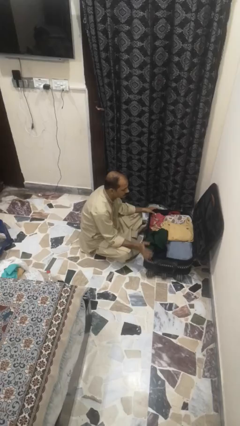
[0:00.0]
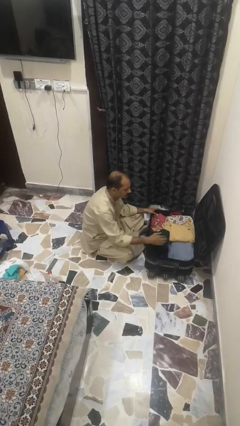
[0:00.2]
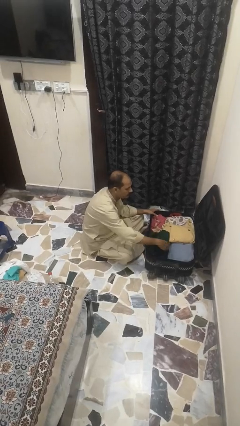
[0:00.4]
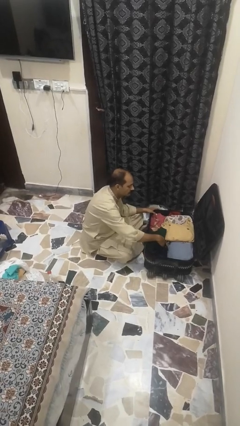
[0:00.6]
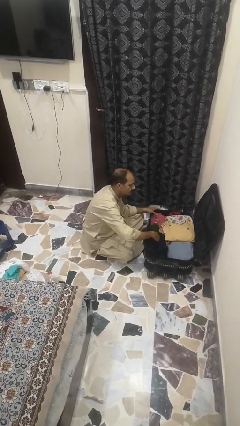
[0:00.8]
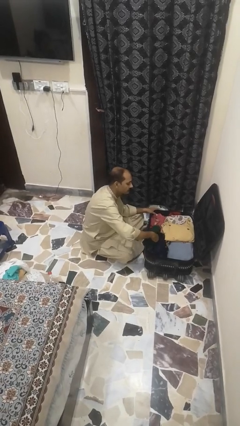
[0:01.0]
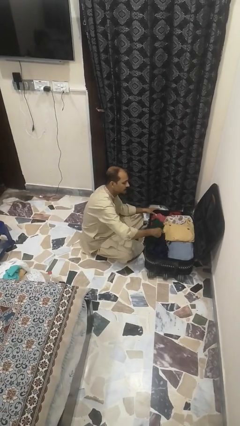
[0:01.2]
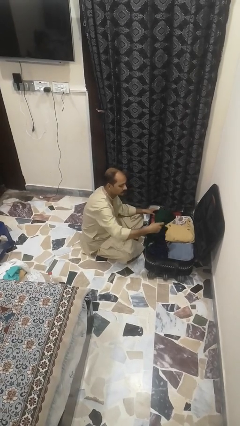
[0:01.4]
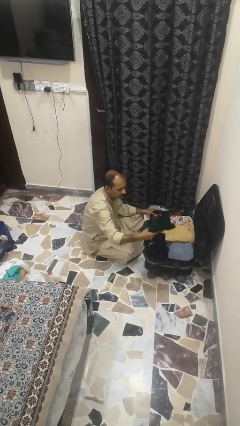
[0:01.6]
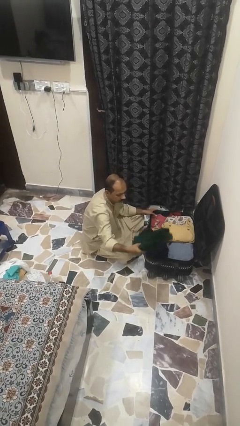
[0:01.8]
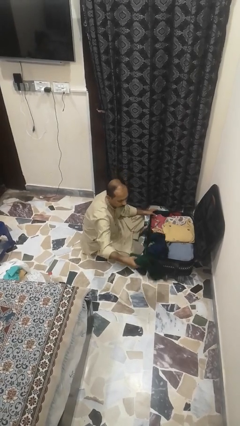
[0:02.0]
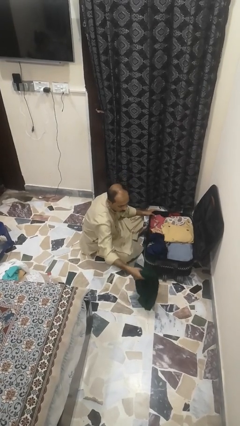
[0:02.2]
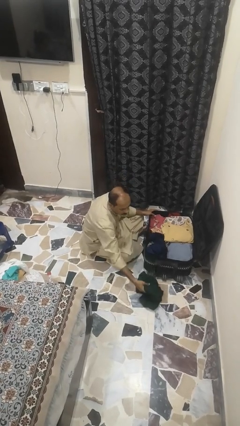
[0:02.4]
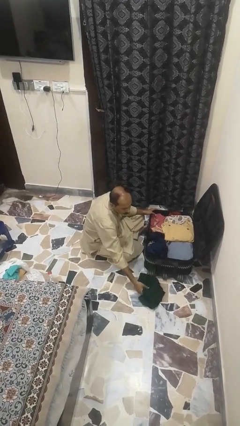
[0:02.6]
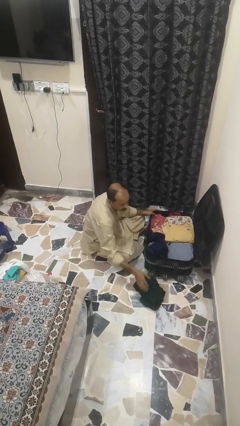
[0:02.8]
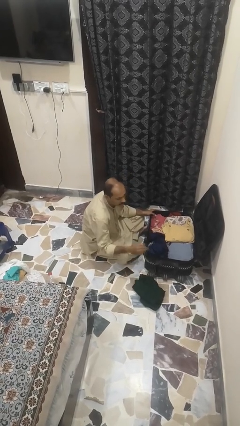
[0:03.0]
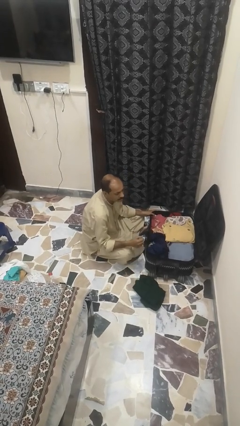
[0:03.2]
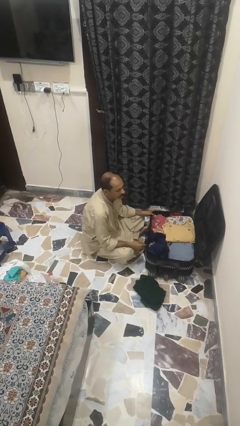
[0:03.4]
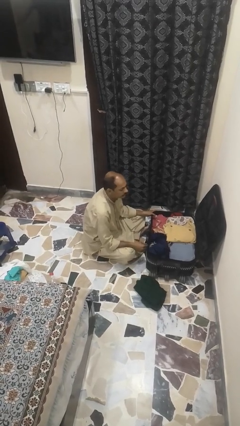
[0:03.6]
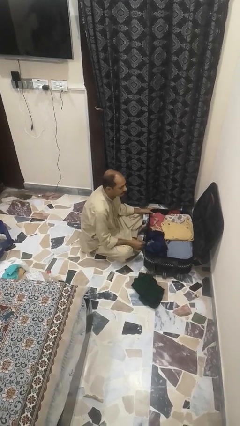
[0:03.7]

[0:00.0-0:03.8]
person unloads clothes from suitcase

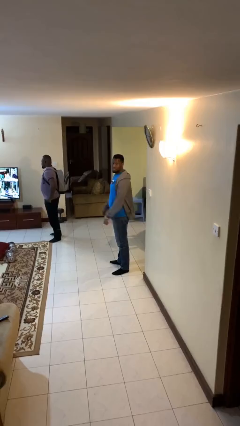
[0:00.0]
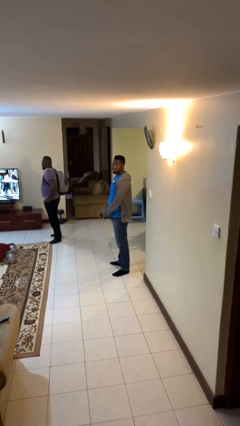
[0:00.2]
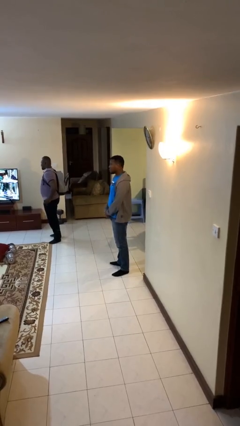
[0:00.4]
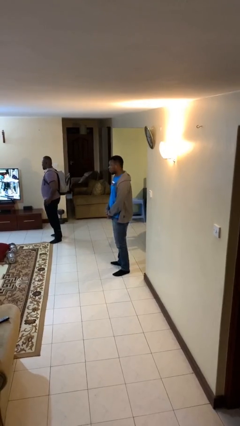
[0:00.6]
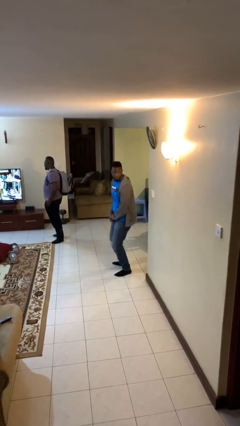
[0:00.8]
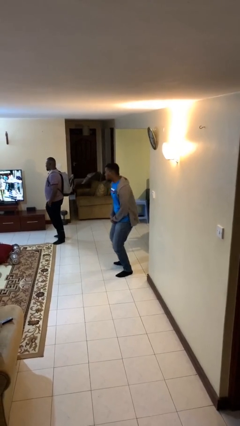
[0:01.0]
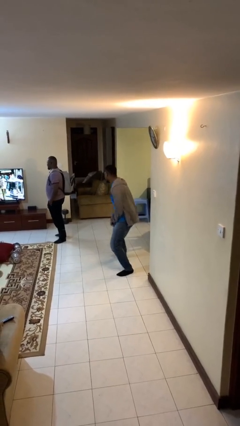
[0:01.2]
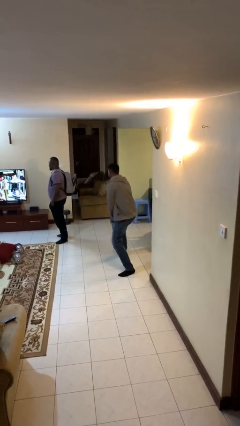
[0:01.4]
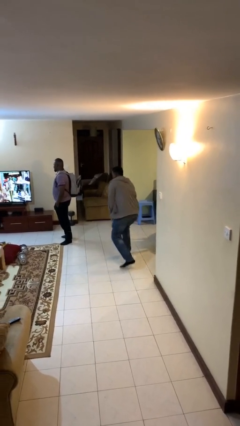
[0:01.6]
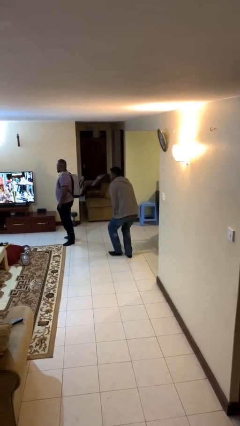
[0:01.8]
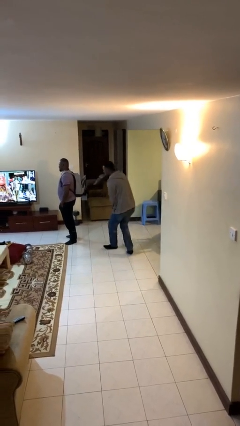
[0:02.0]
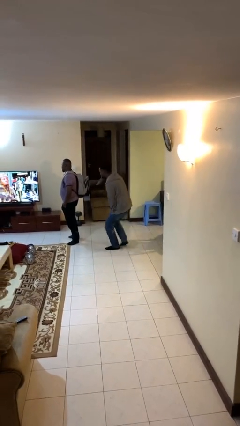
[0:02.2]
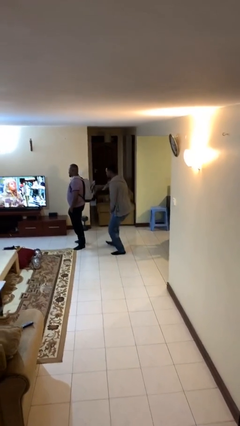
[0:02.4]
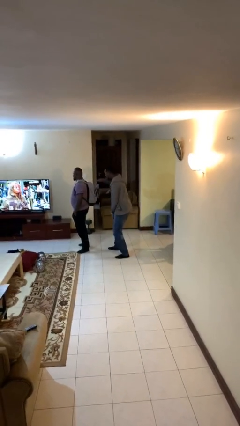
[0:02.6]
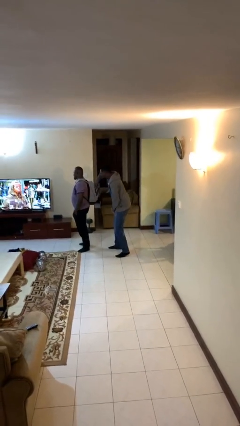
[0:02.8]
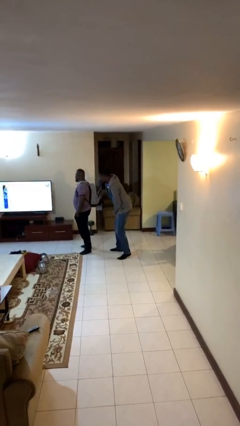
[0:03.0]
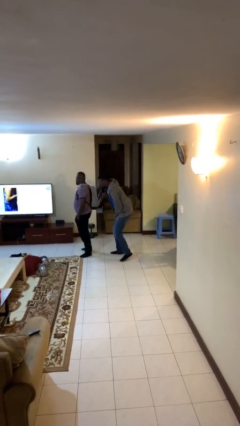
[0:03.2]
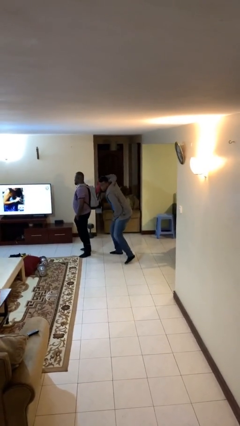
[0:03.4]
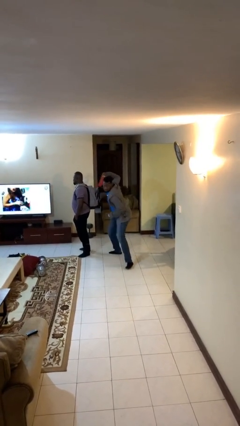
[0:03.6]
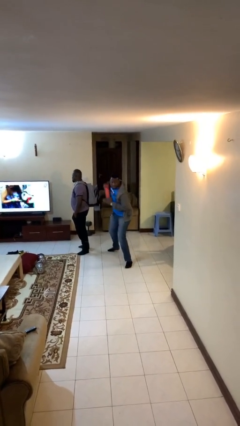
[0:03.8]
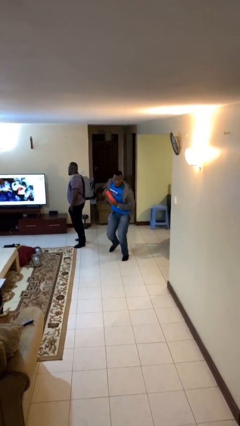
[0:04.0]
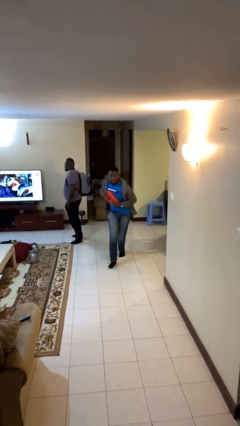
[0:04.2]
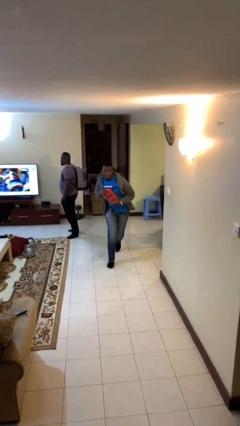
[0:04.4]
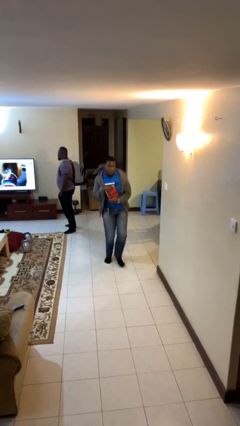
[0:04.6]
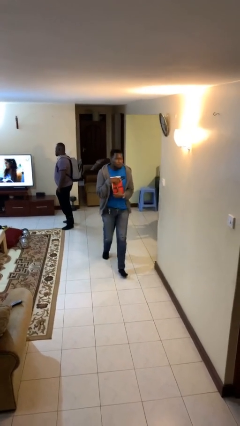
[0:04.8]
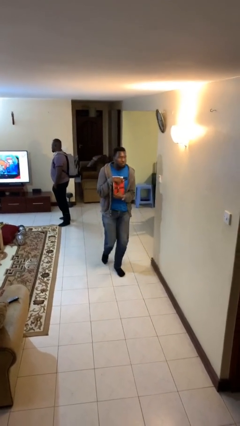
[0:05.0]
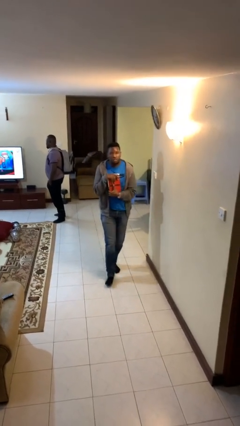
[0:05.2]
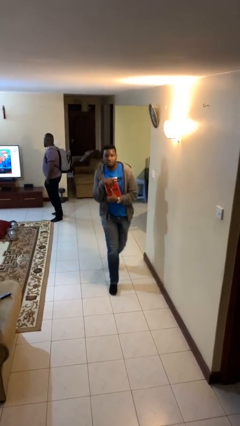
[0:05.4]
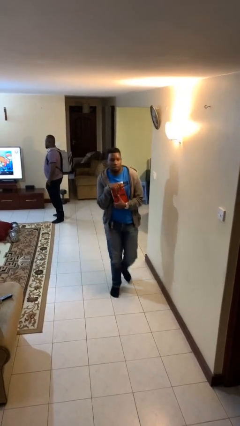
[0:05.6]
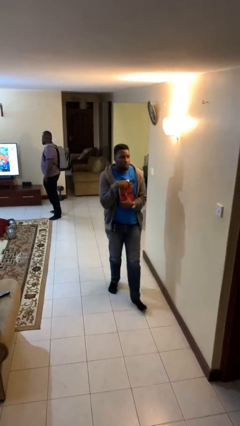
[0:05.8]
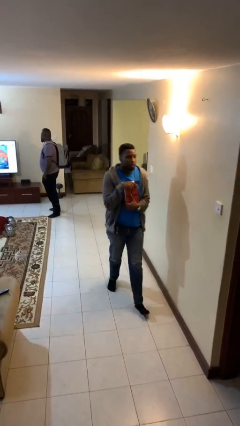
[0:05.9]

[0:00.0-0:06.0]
person steals object from person

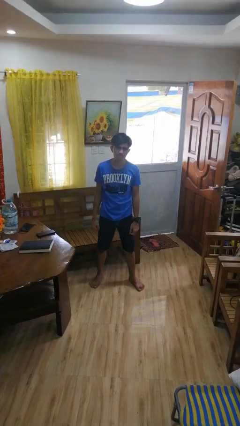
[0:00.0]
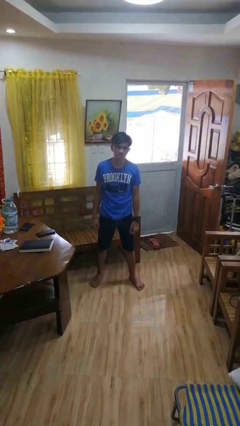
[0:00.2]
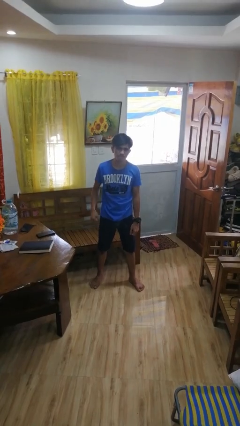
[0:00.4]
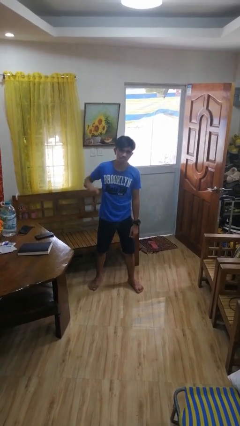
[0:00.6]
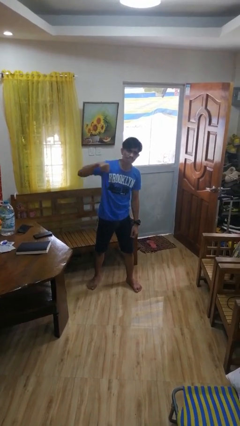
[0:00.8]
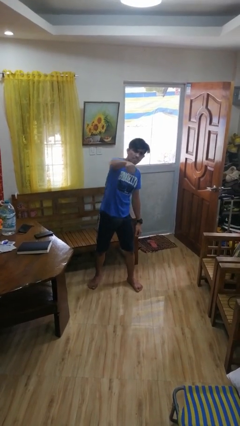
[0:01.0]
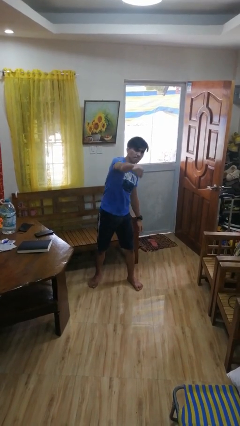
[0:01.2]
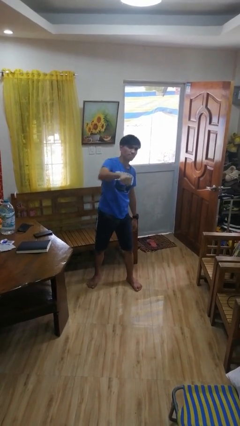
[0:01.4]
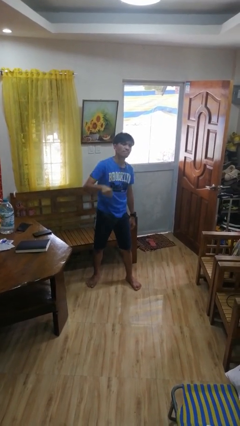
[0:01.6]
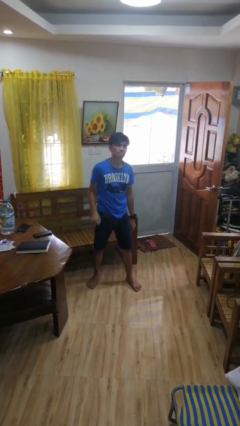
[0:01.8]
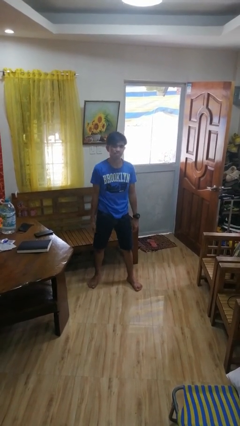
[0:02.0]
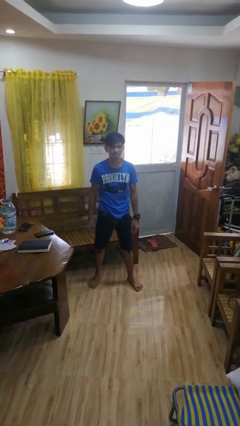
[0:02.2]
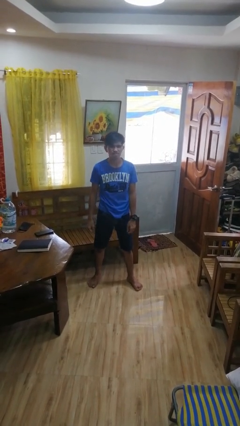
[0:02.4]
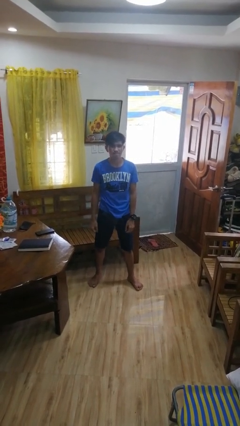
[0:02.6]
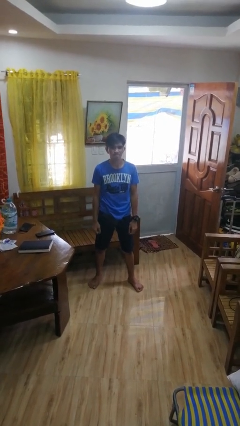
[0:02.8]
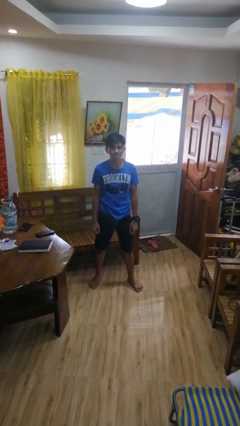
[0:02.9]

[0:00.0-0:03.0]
person punches

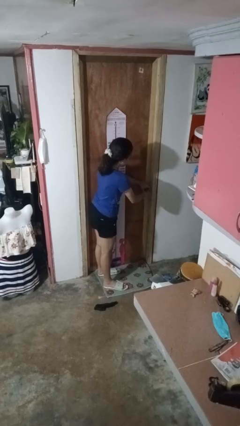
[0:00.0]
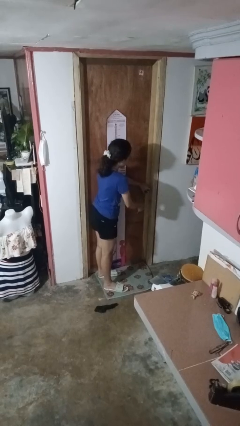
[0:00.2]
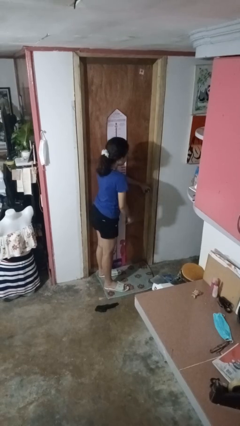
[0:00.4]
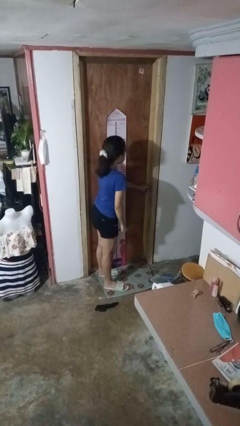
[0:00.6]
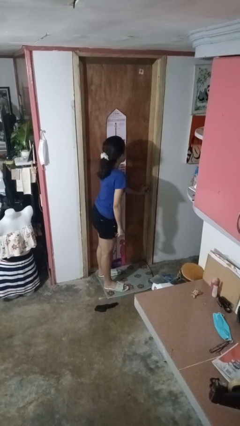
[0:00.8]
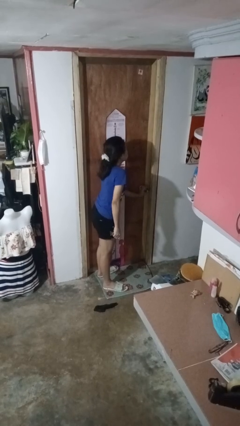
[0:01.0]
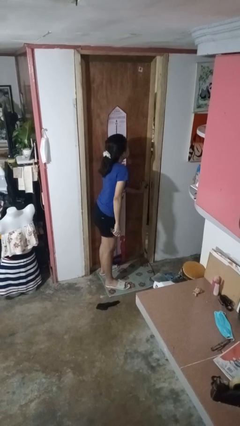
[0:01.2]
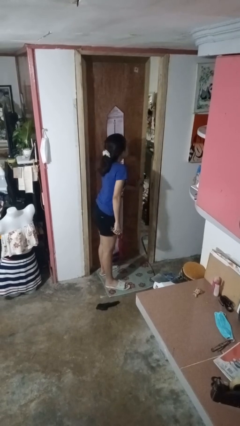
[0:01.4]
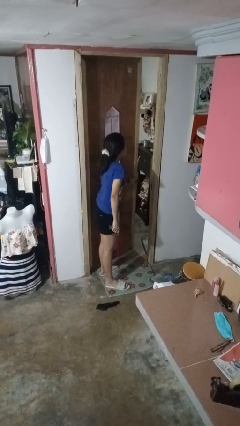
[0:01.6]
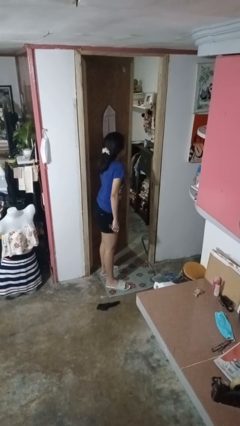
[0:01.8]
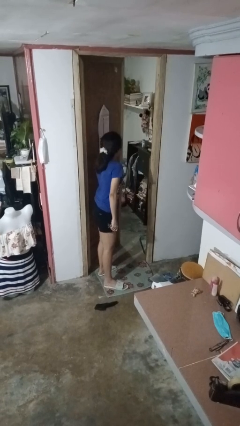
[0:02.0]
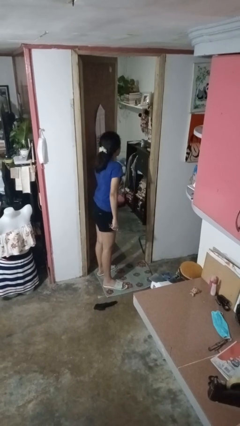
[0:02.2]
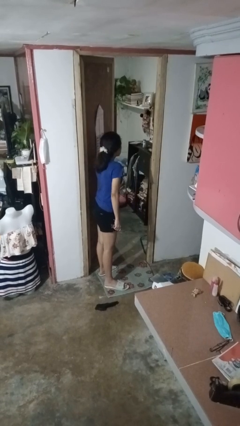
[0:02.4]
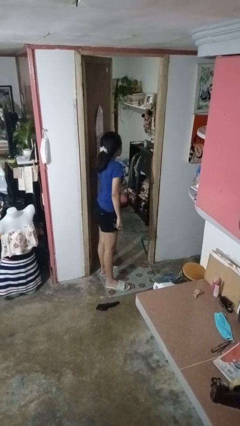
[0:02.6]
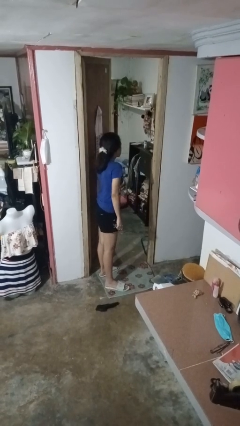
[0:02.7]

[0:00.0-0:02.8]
person opens facility door

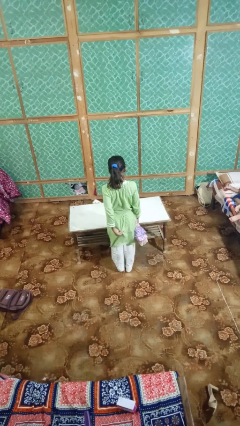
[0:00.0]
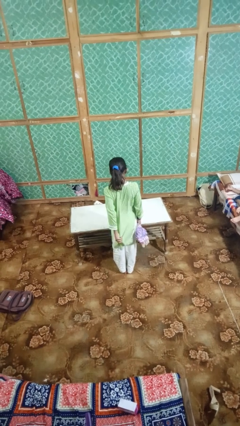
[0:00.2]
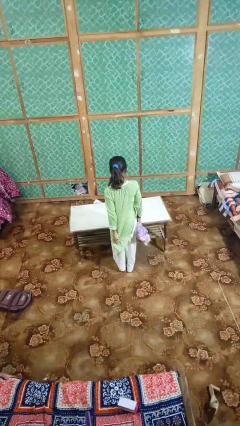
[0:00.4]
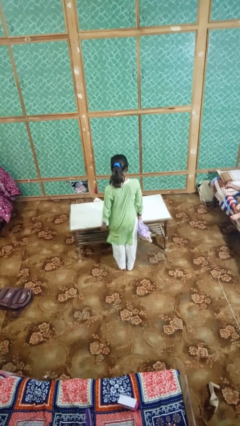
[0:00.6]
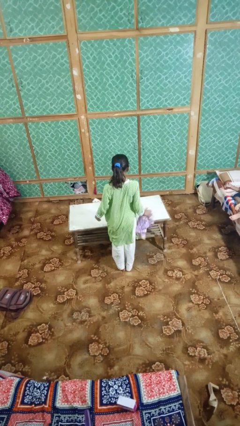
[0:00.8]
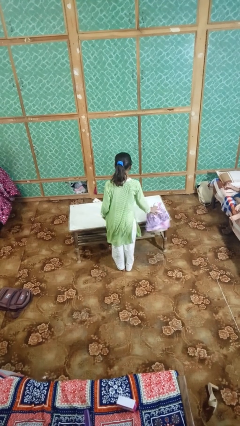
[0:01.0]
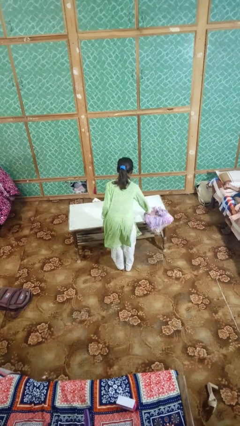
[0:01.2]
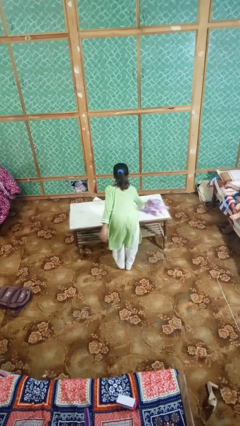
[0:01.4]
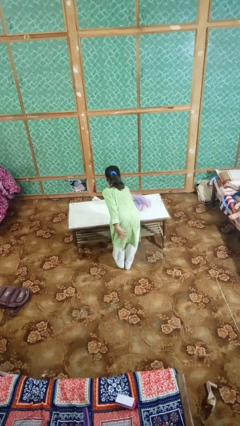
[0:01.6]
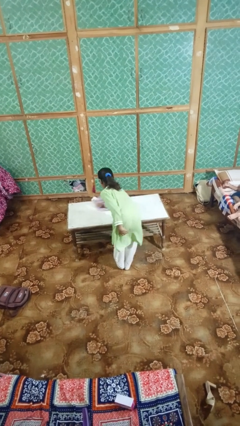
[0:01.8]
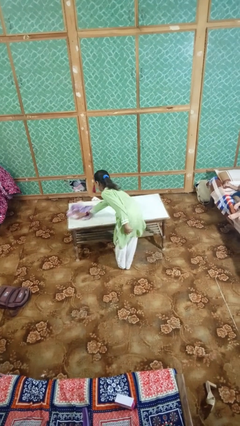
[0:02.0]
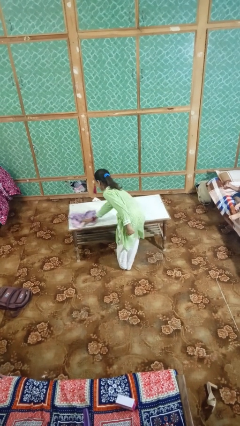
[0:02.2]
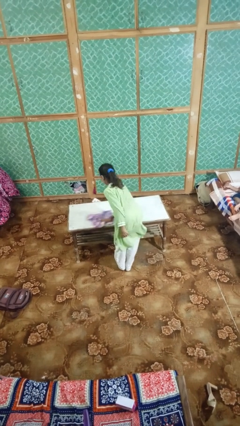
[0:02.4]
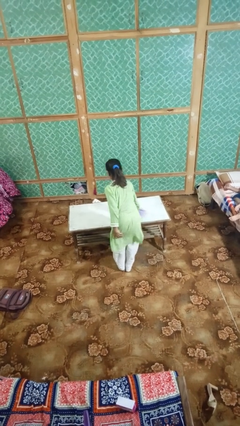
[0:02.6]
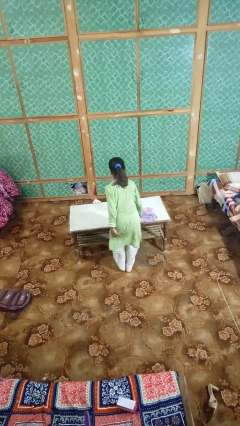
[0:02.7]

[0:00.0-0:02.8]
person cleans table with rag
